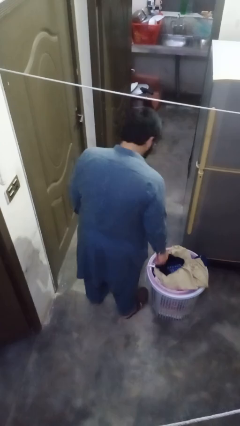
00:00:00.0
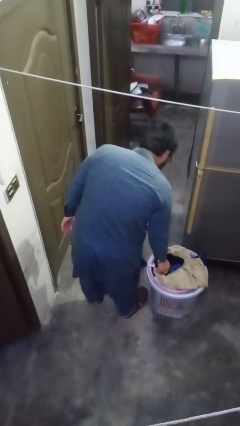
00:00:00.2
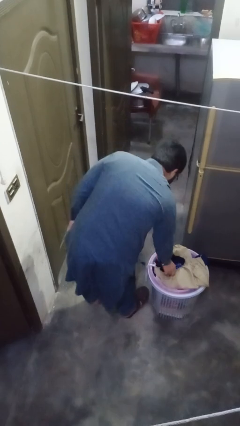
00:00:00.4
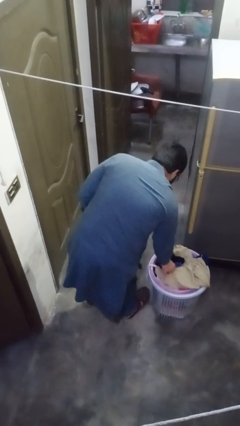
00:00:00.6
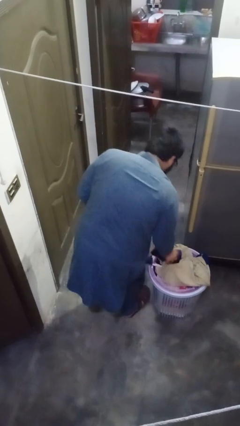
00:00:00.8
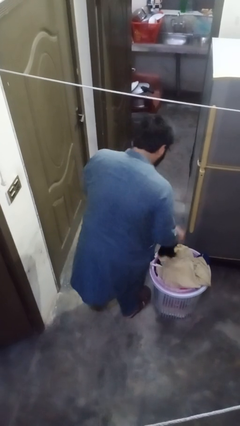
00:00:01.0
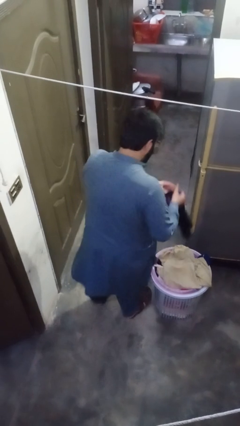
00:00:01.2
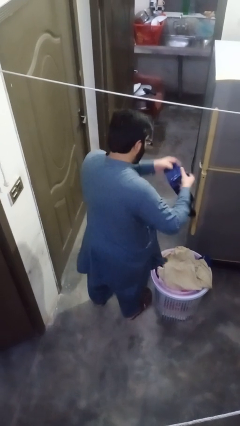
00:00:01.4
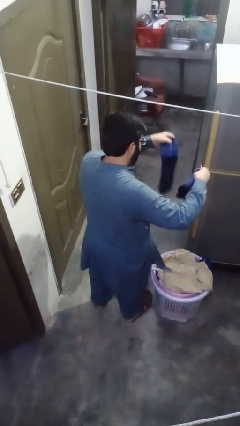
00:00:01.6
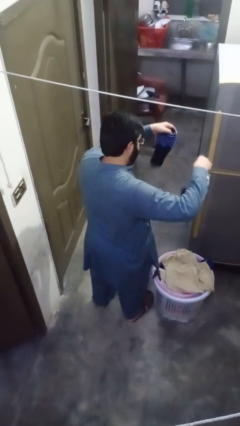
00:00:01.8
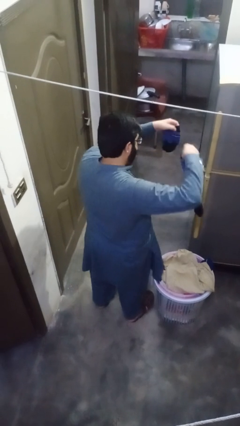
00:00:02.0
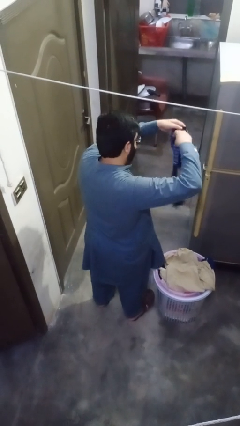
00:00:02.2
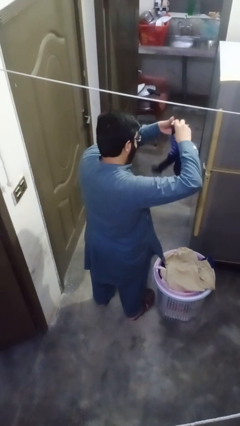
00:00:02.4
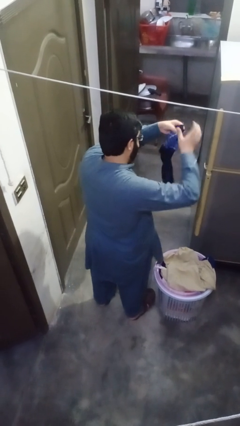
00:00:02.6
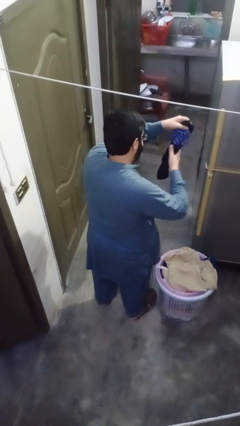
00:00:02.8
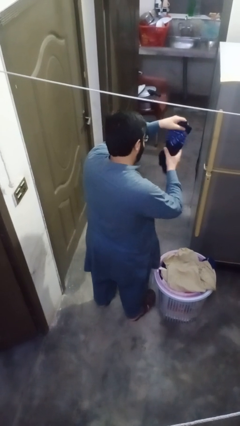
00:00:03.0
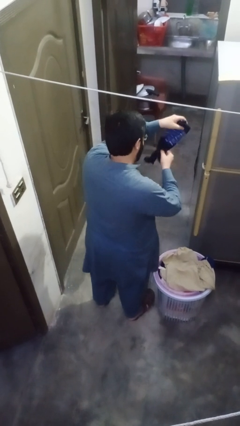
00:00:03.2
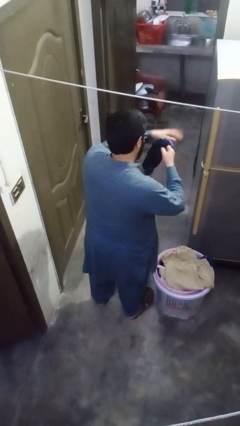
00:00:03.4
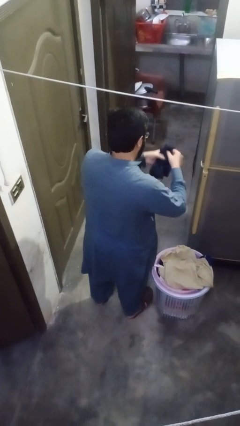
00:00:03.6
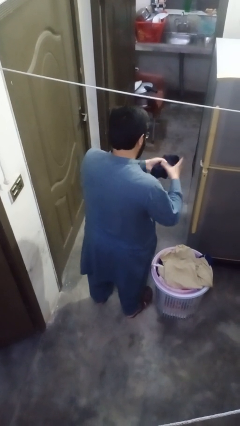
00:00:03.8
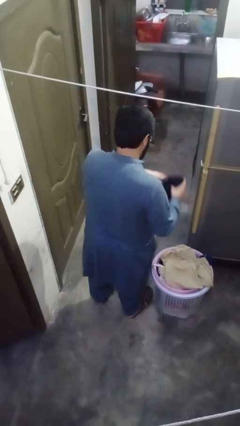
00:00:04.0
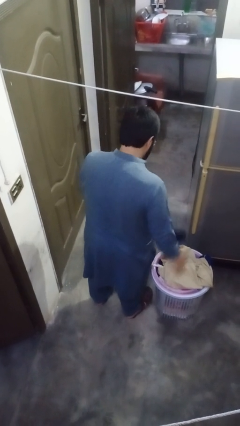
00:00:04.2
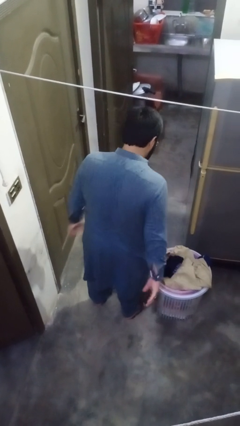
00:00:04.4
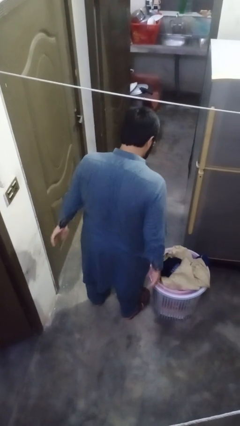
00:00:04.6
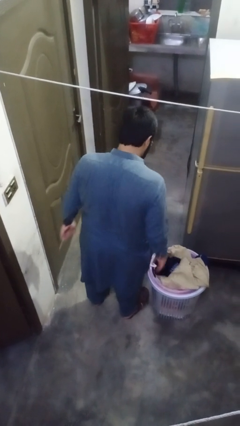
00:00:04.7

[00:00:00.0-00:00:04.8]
person folds socks

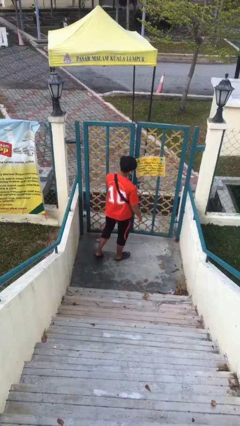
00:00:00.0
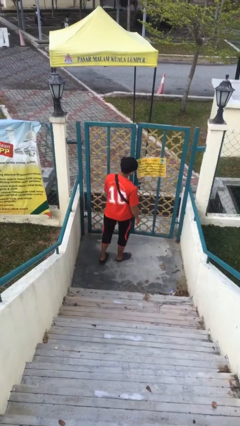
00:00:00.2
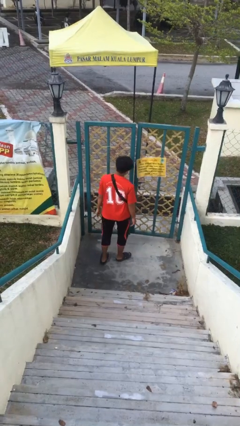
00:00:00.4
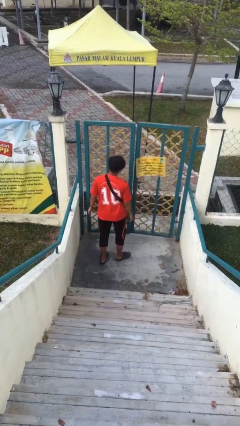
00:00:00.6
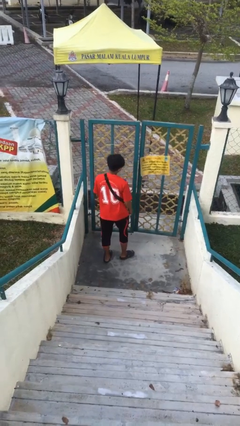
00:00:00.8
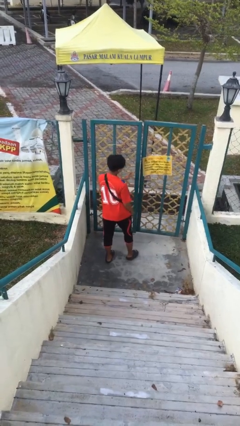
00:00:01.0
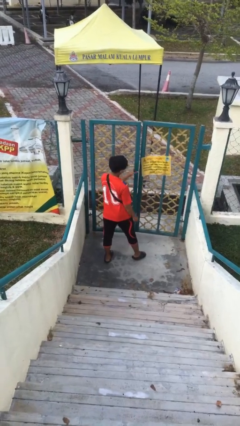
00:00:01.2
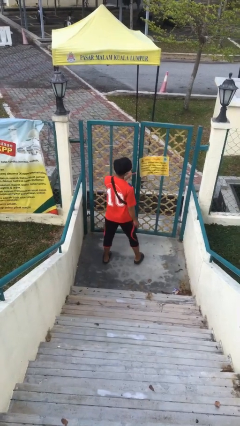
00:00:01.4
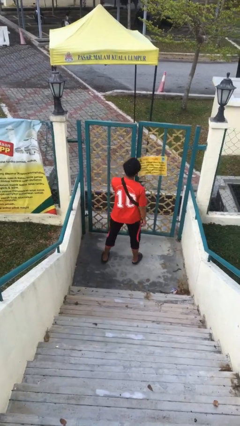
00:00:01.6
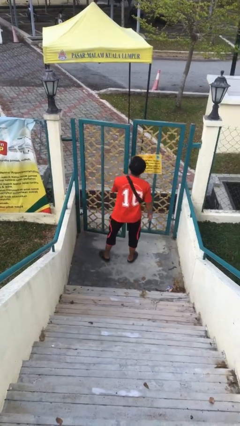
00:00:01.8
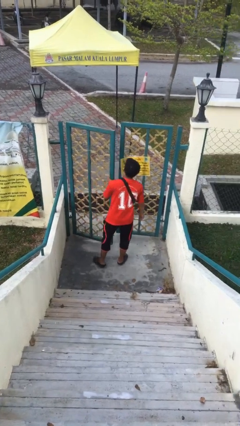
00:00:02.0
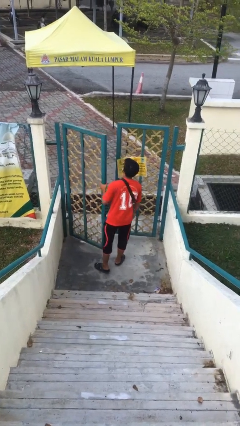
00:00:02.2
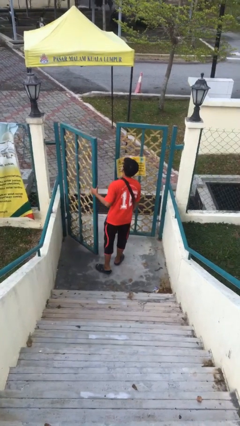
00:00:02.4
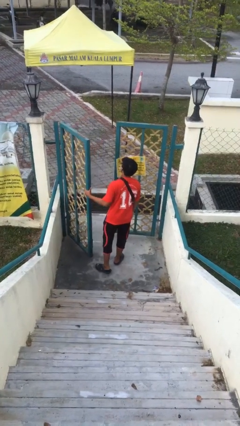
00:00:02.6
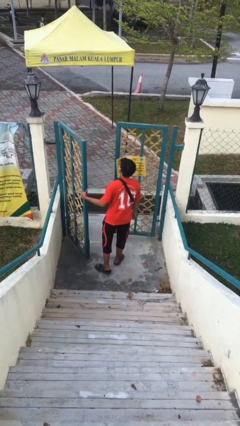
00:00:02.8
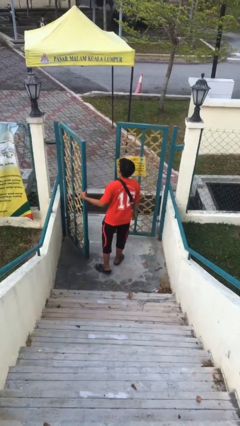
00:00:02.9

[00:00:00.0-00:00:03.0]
person opens facility door

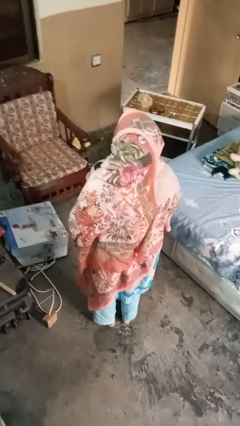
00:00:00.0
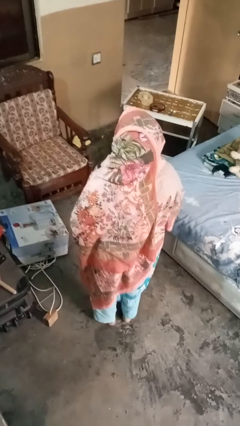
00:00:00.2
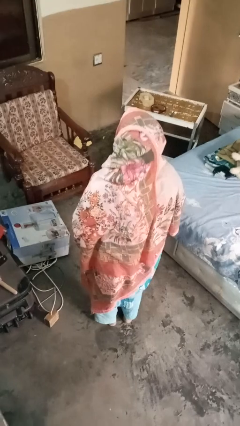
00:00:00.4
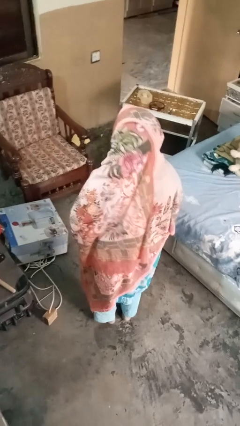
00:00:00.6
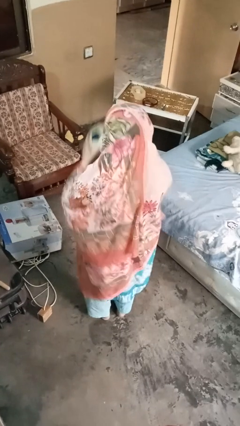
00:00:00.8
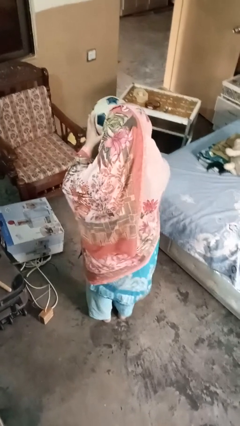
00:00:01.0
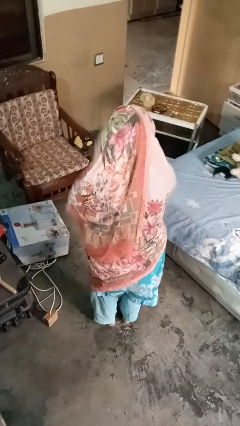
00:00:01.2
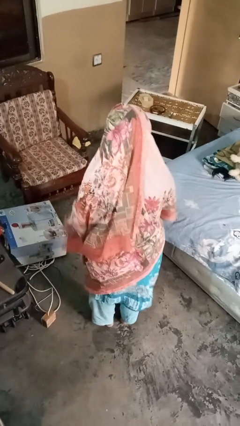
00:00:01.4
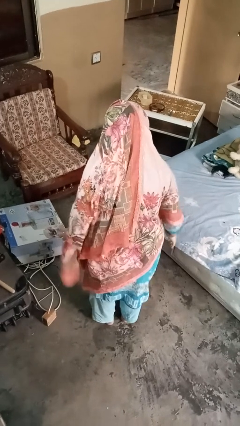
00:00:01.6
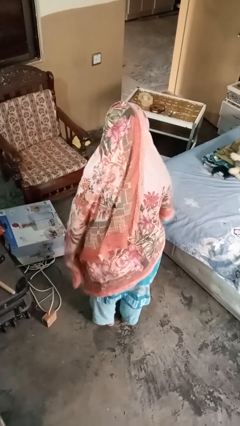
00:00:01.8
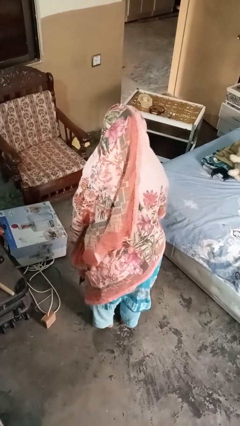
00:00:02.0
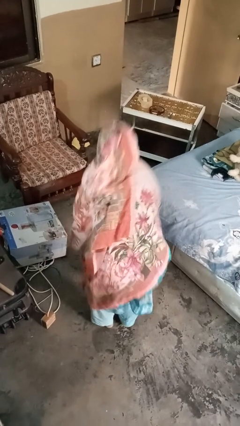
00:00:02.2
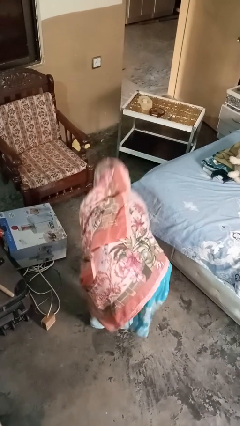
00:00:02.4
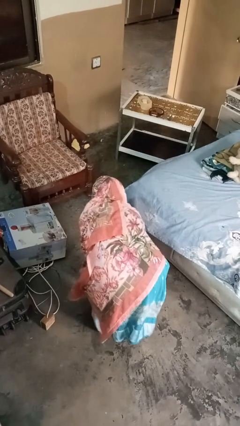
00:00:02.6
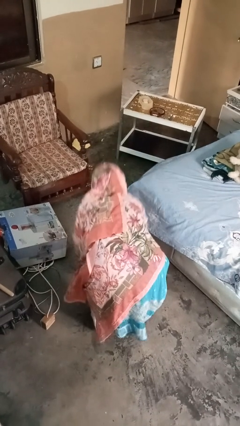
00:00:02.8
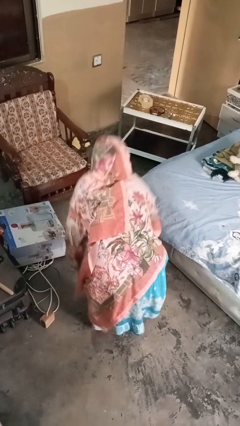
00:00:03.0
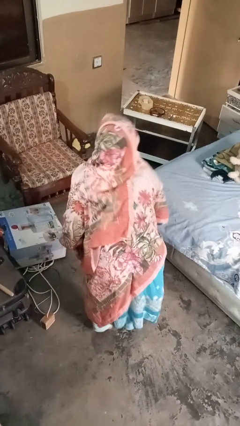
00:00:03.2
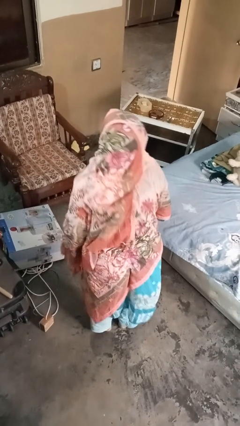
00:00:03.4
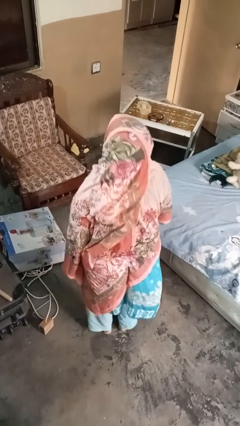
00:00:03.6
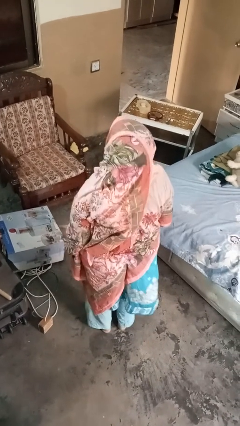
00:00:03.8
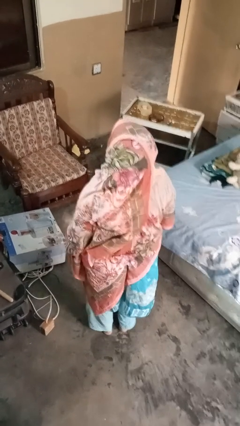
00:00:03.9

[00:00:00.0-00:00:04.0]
person bounces ball on floor

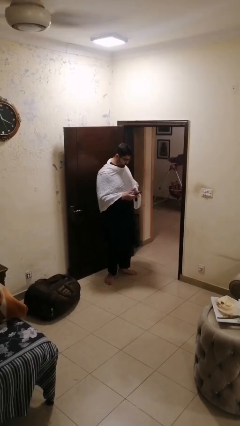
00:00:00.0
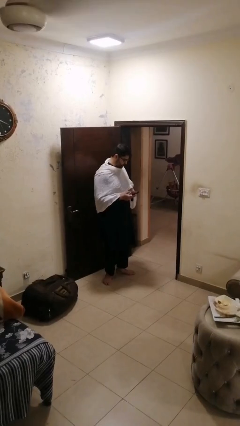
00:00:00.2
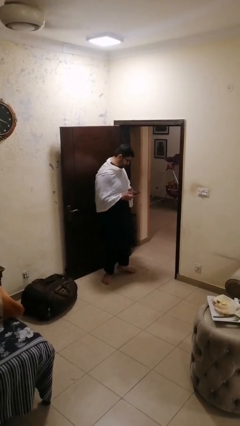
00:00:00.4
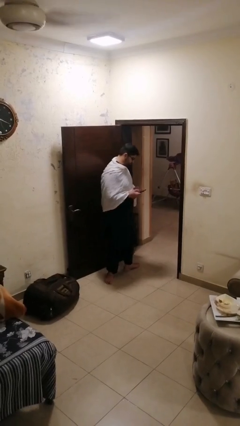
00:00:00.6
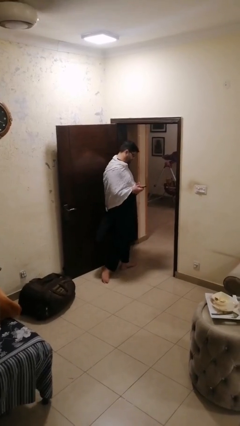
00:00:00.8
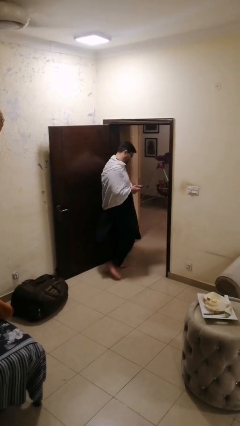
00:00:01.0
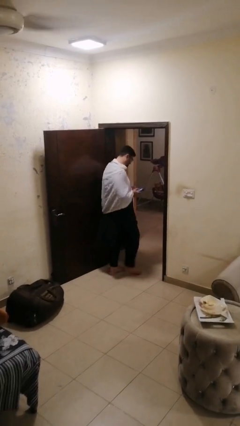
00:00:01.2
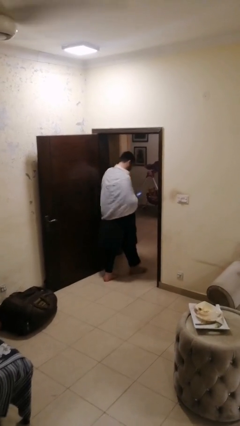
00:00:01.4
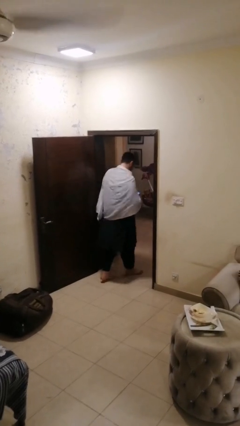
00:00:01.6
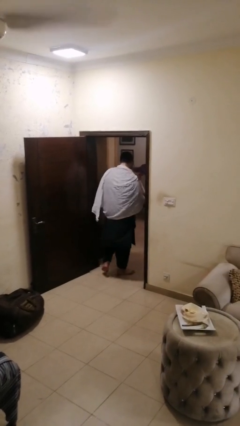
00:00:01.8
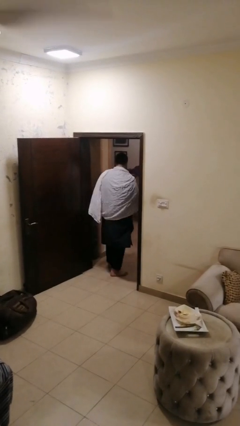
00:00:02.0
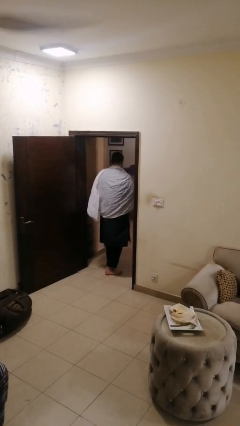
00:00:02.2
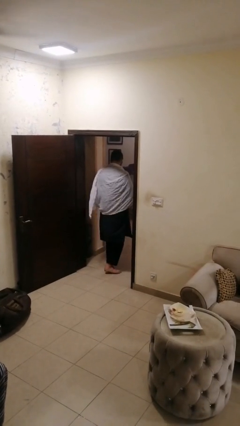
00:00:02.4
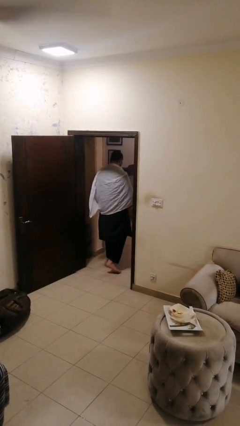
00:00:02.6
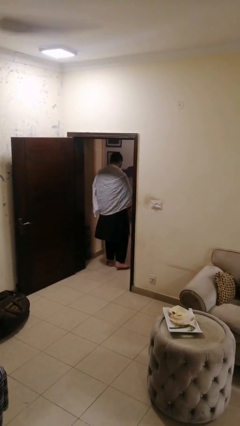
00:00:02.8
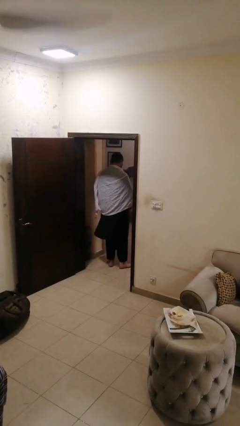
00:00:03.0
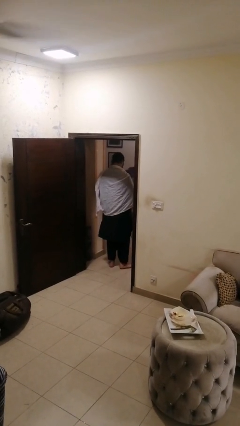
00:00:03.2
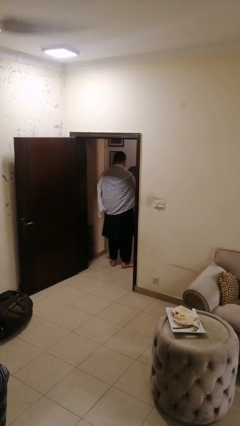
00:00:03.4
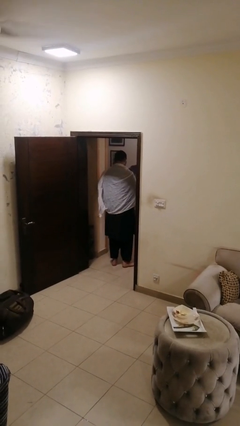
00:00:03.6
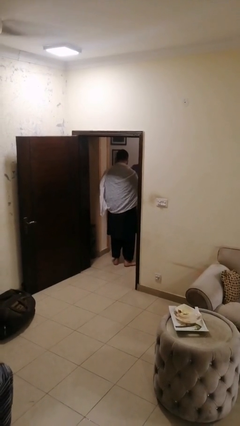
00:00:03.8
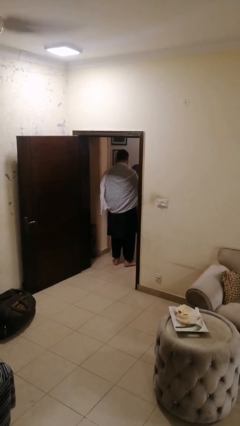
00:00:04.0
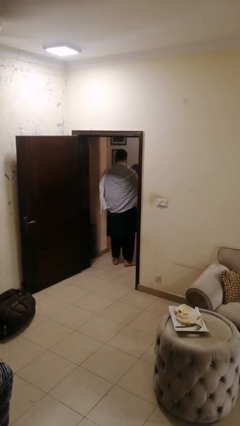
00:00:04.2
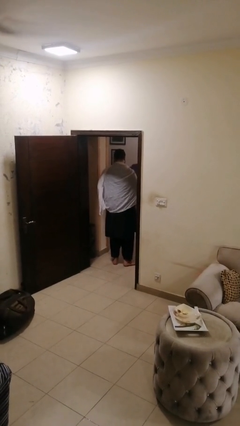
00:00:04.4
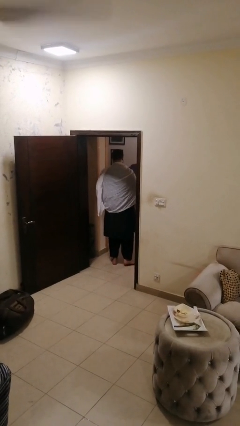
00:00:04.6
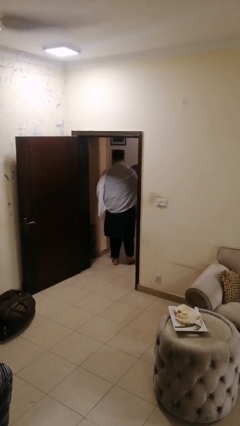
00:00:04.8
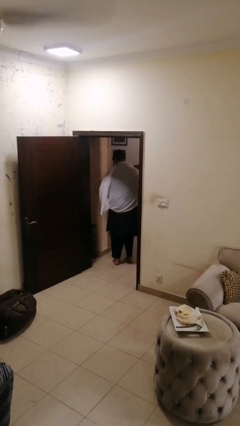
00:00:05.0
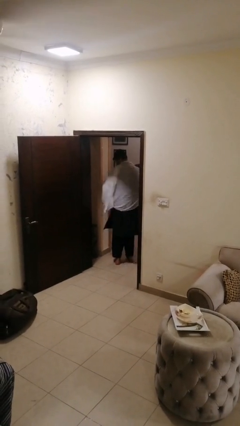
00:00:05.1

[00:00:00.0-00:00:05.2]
person exits scene through structure

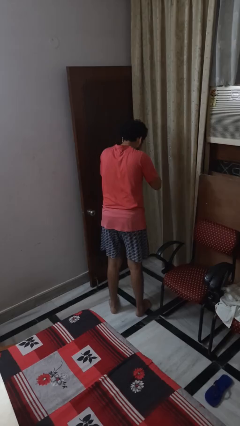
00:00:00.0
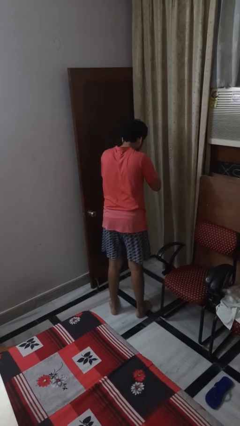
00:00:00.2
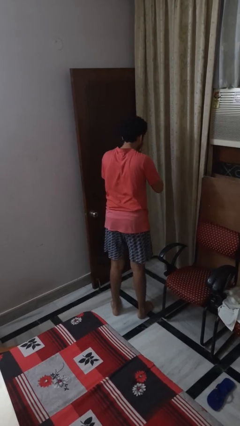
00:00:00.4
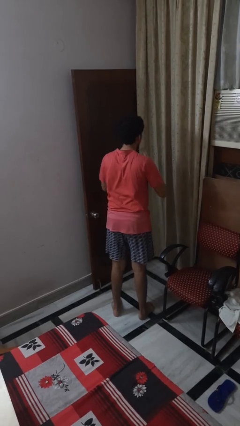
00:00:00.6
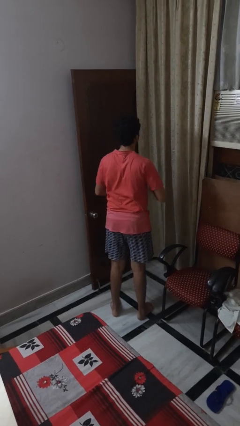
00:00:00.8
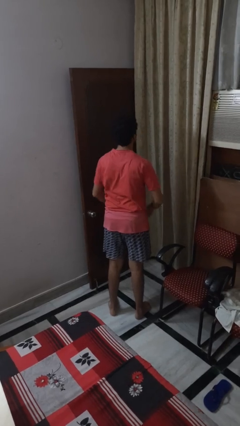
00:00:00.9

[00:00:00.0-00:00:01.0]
person sneezes into hand
